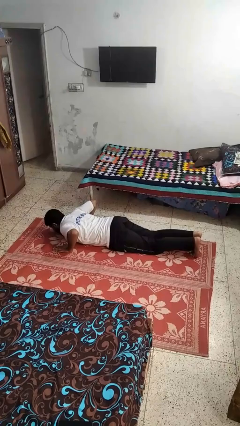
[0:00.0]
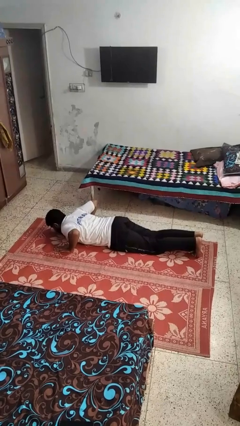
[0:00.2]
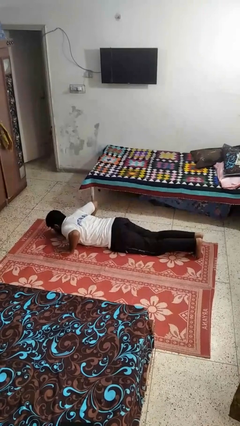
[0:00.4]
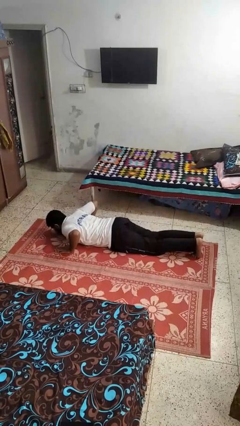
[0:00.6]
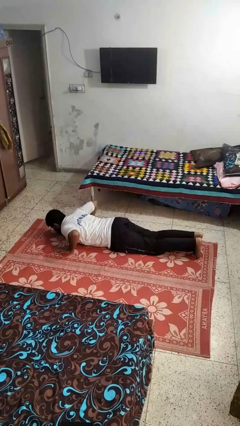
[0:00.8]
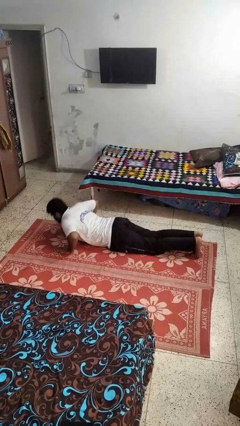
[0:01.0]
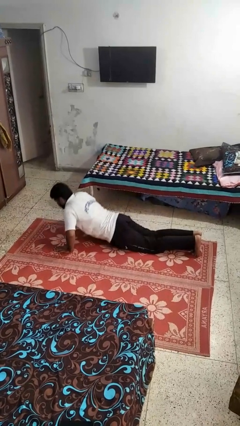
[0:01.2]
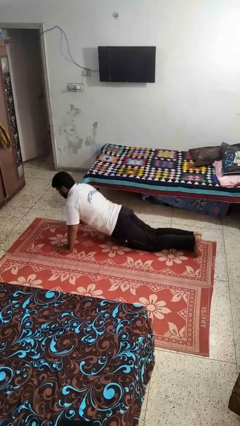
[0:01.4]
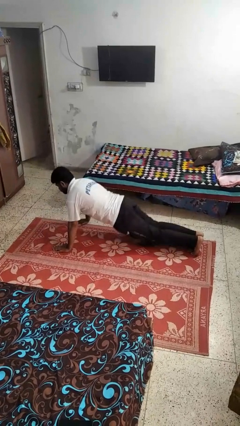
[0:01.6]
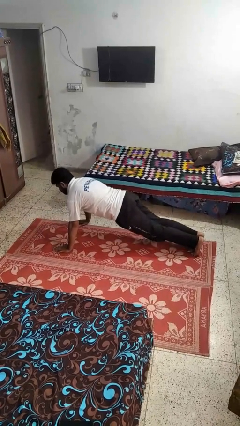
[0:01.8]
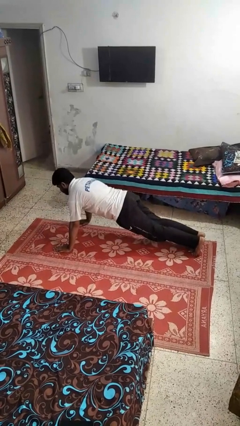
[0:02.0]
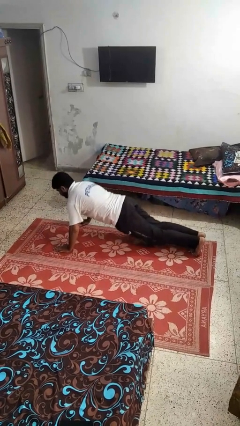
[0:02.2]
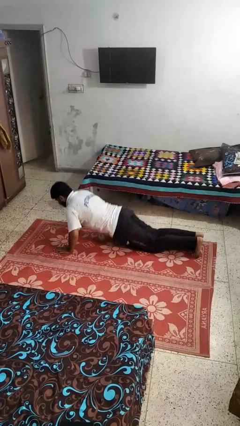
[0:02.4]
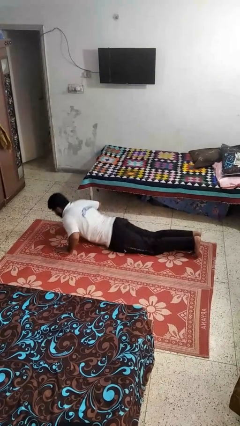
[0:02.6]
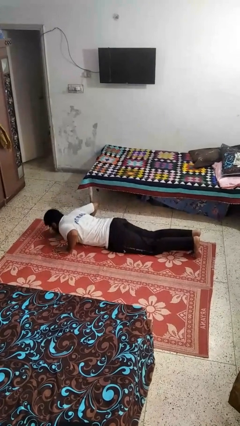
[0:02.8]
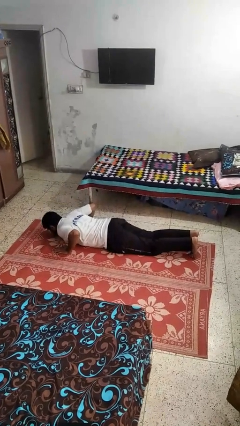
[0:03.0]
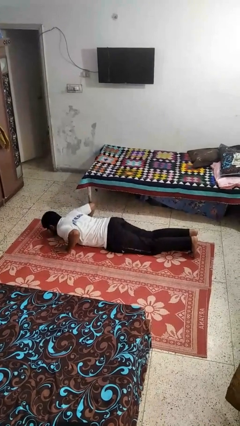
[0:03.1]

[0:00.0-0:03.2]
person exercises with pushup

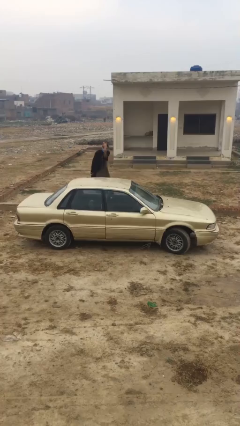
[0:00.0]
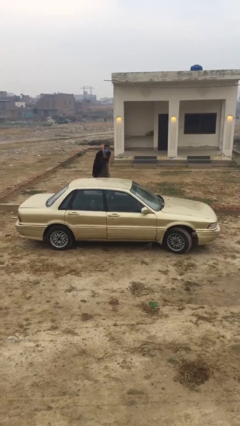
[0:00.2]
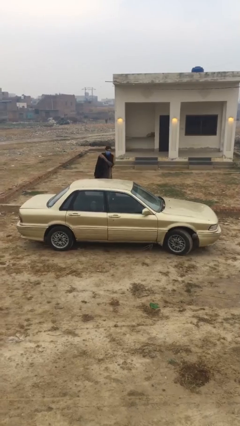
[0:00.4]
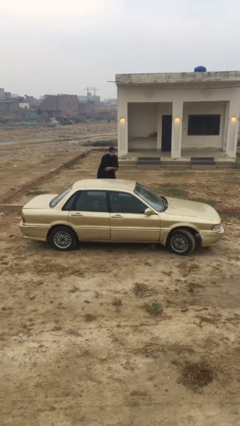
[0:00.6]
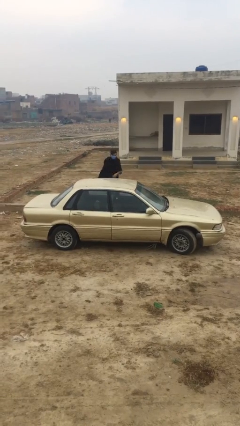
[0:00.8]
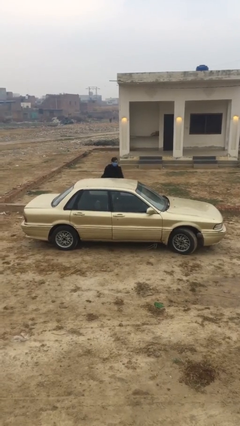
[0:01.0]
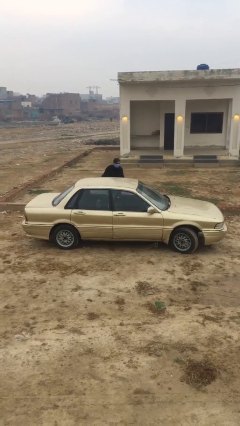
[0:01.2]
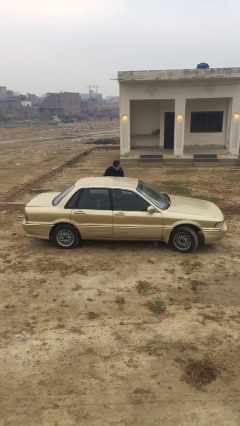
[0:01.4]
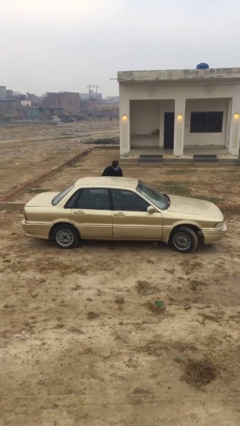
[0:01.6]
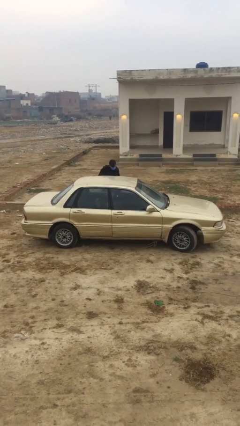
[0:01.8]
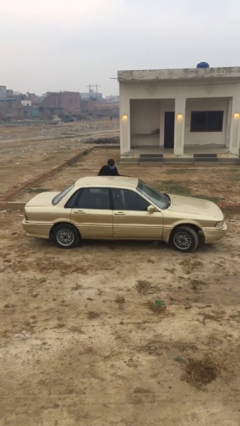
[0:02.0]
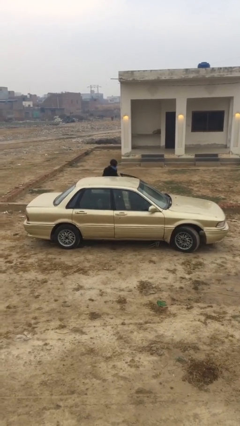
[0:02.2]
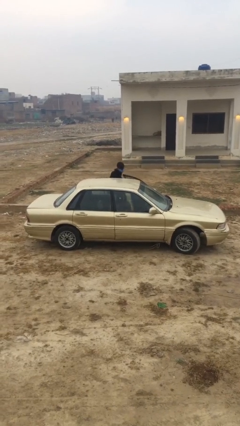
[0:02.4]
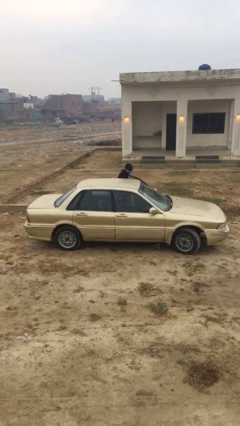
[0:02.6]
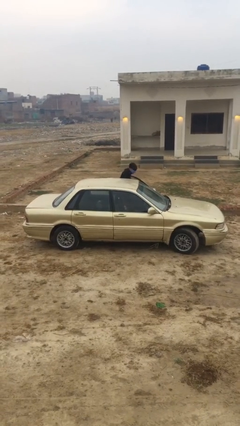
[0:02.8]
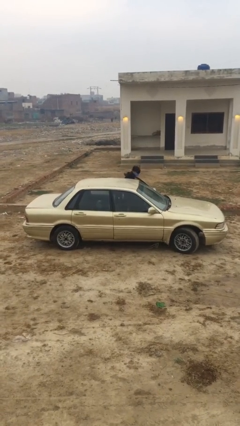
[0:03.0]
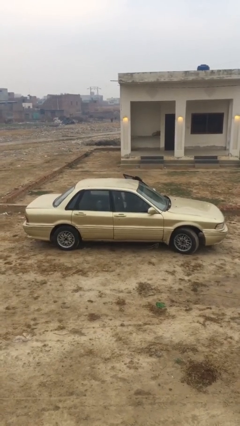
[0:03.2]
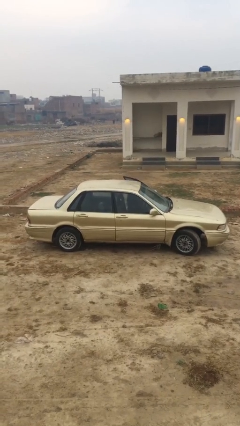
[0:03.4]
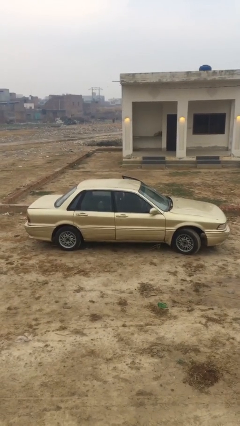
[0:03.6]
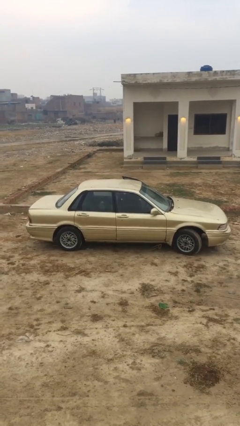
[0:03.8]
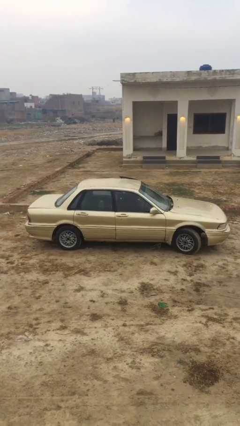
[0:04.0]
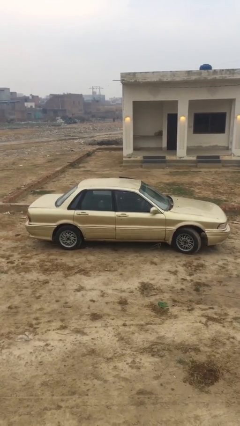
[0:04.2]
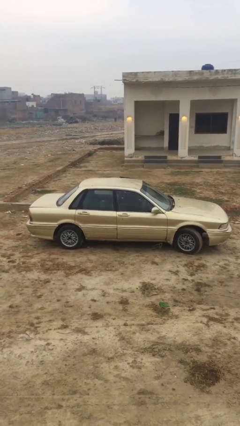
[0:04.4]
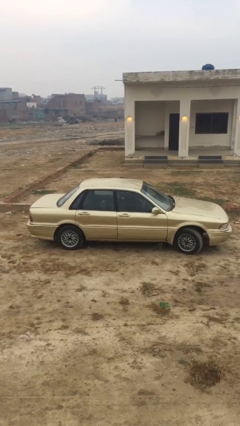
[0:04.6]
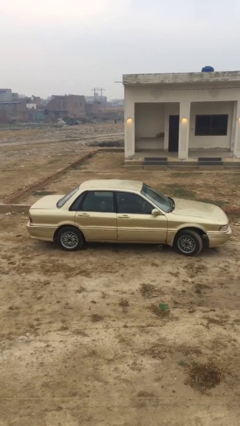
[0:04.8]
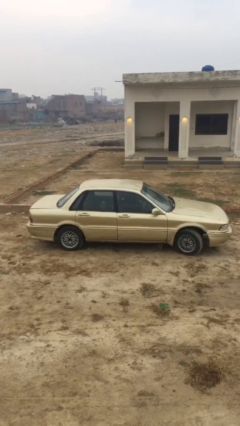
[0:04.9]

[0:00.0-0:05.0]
car picks up person

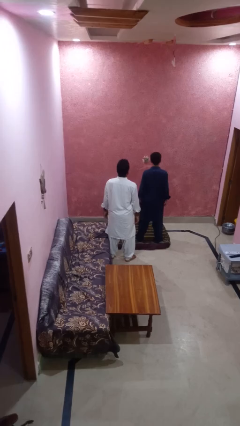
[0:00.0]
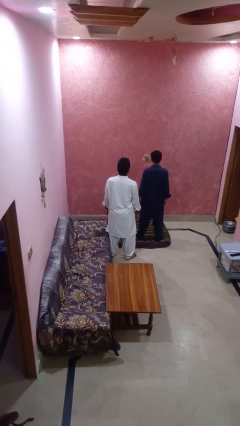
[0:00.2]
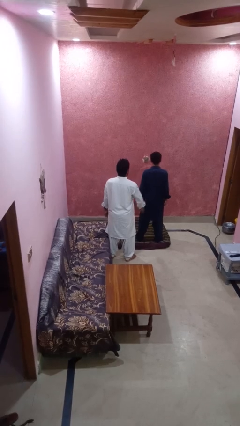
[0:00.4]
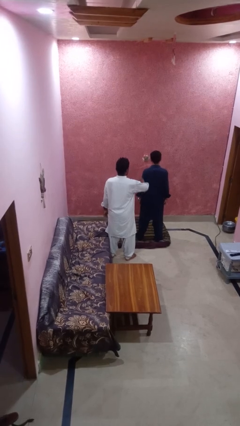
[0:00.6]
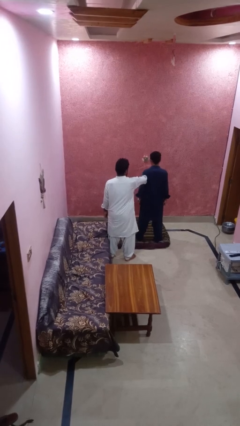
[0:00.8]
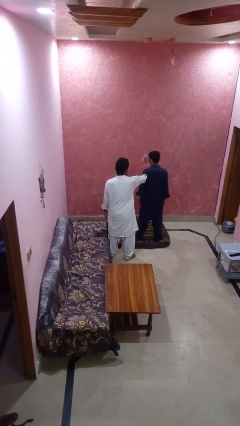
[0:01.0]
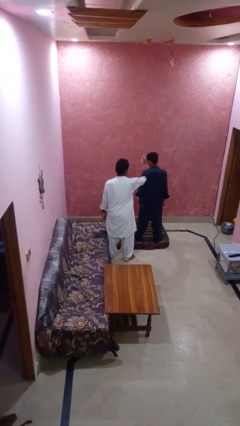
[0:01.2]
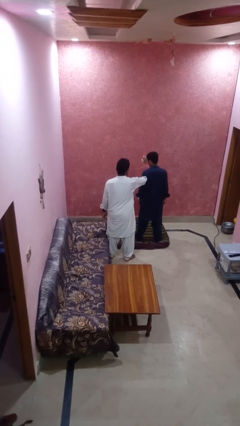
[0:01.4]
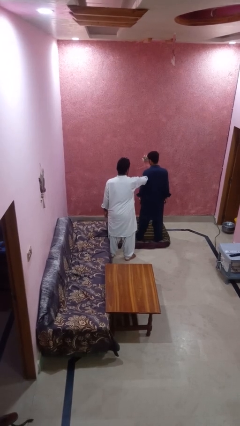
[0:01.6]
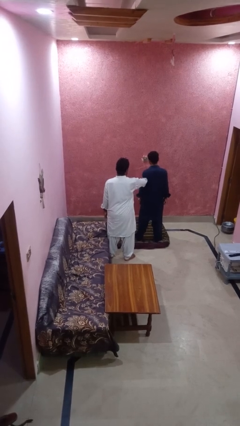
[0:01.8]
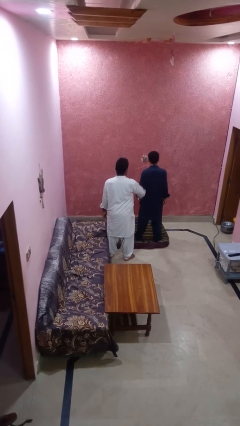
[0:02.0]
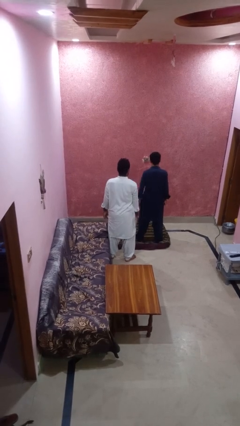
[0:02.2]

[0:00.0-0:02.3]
person grabs person by forearm

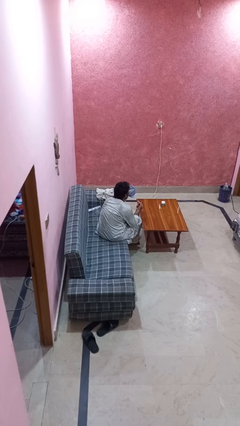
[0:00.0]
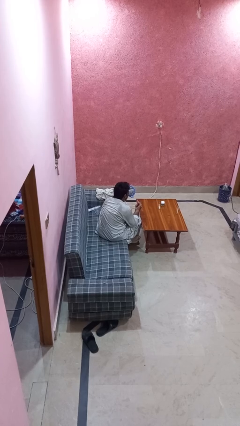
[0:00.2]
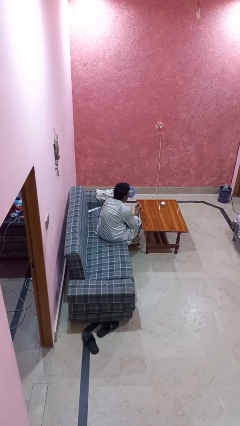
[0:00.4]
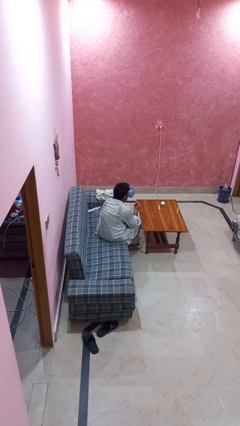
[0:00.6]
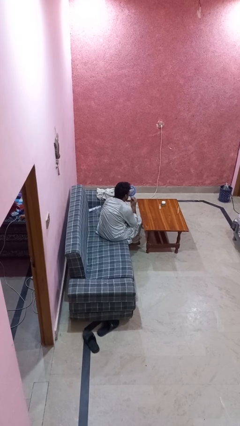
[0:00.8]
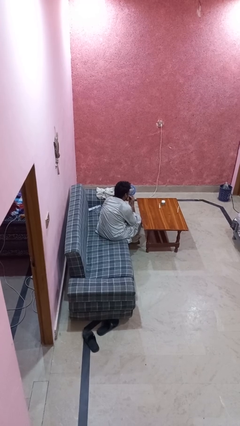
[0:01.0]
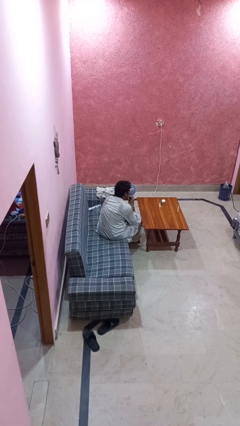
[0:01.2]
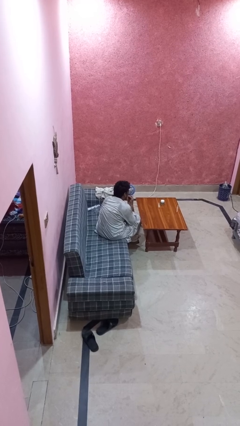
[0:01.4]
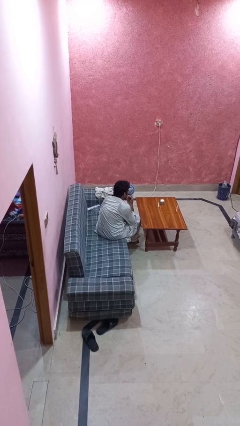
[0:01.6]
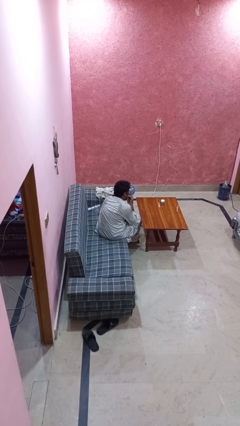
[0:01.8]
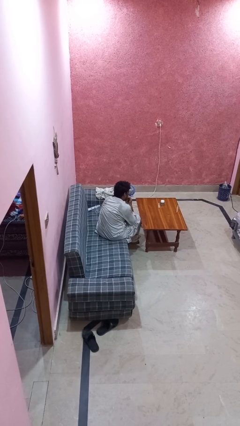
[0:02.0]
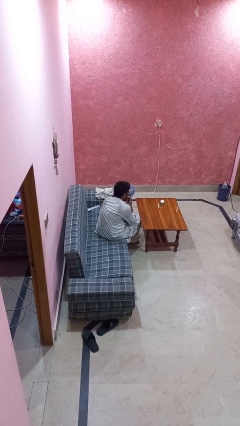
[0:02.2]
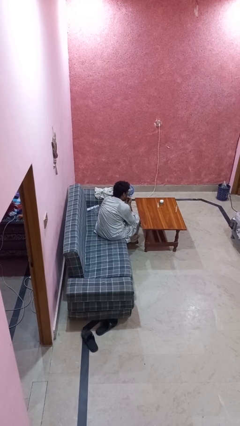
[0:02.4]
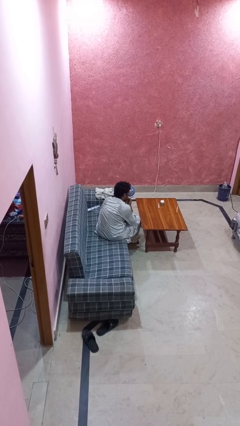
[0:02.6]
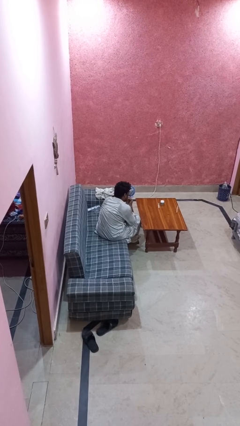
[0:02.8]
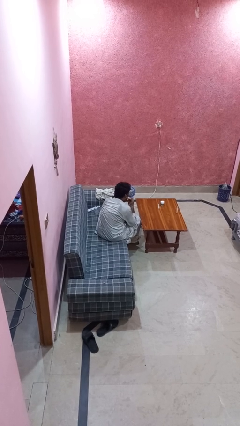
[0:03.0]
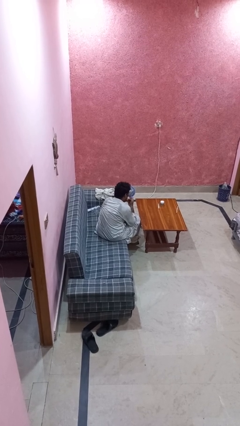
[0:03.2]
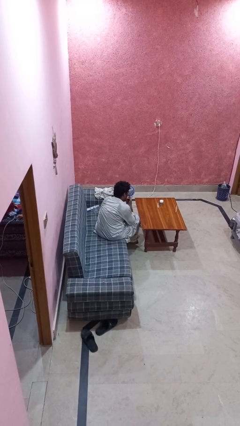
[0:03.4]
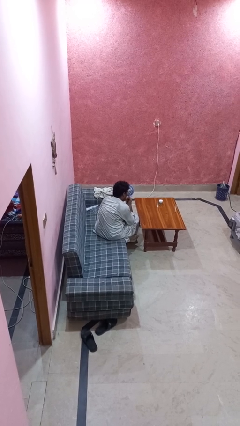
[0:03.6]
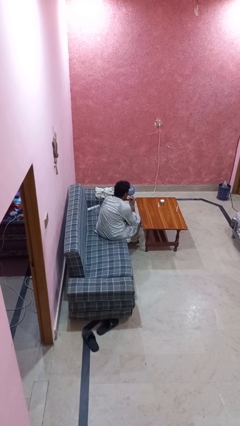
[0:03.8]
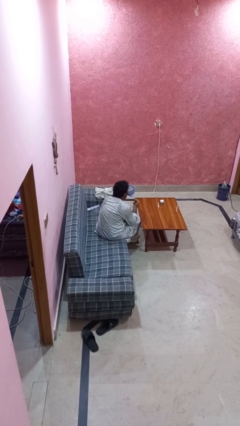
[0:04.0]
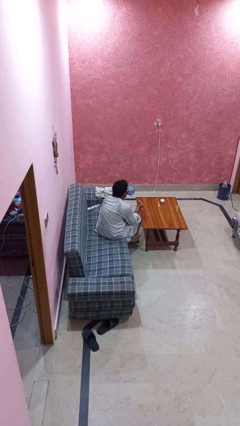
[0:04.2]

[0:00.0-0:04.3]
person applies lip makeup

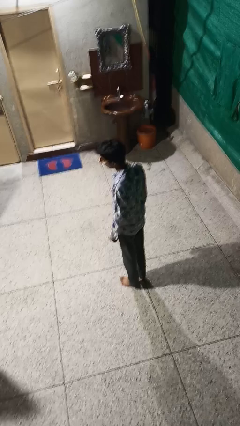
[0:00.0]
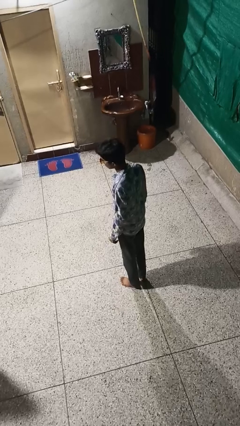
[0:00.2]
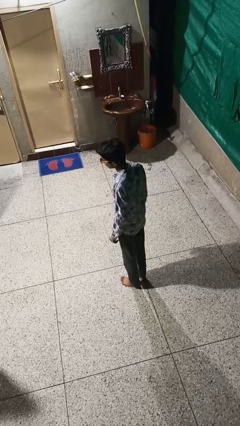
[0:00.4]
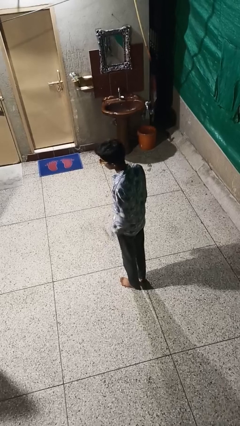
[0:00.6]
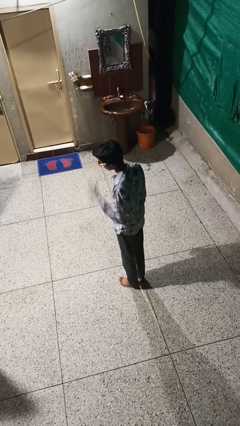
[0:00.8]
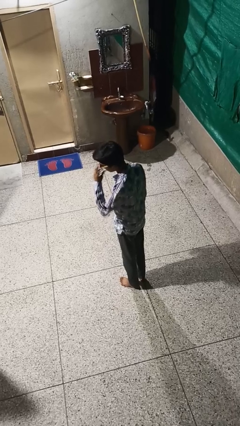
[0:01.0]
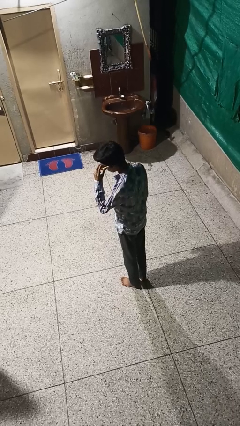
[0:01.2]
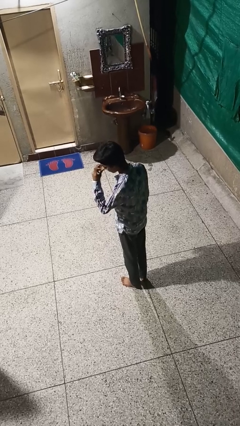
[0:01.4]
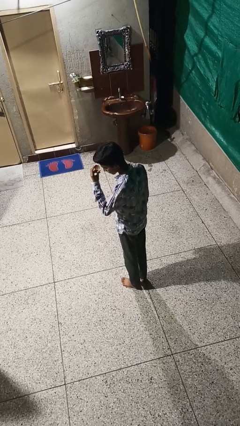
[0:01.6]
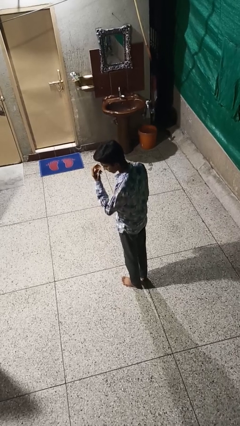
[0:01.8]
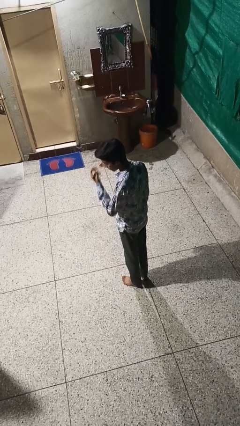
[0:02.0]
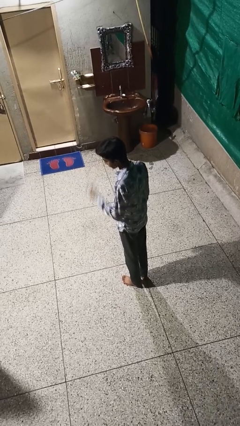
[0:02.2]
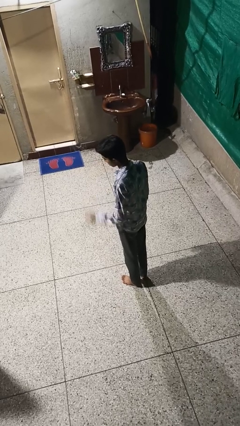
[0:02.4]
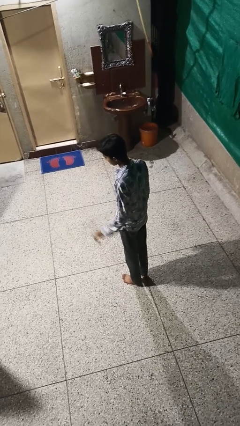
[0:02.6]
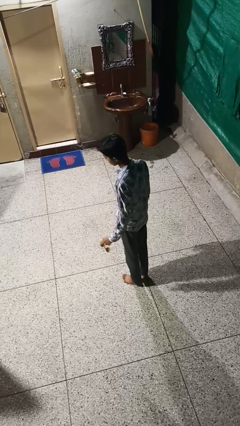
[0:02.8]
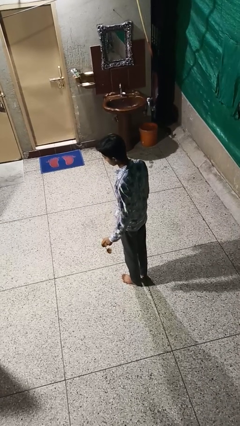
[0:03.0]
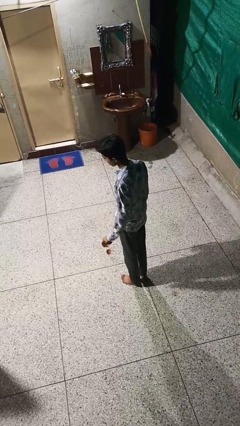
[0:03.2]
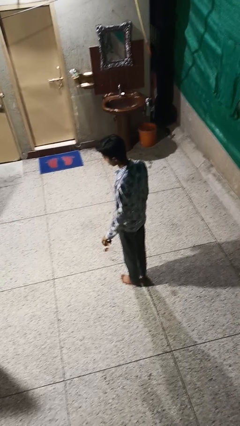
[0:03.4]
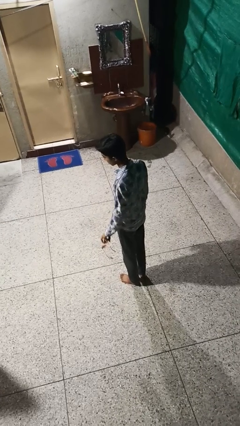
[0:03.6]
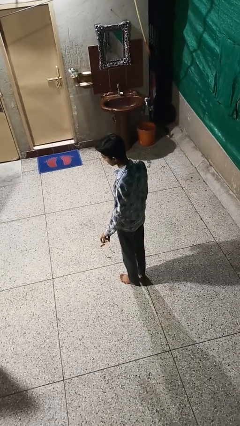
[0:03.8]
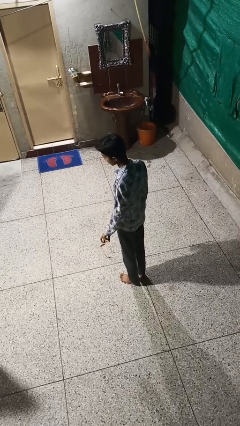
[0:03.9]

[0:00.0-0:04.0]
person takes off sunglasses
